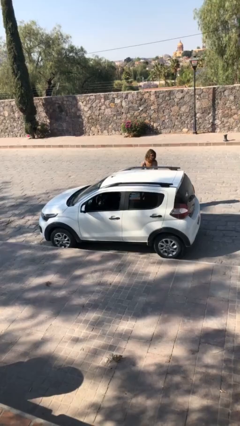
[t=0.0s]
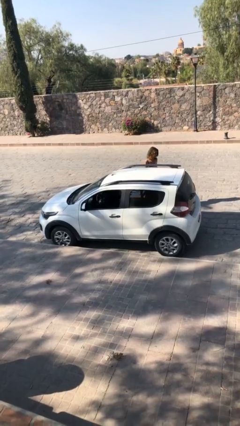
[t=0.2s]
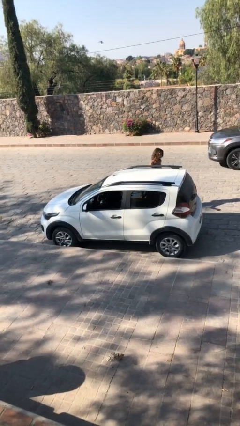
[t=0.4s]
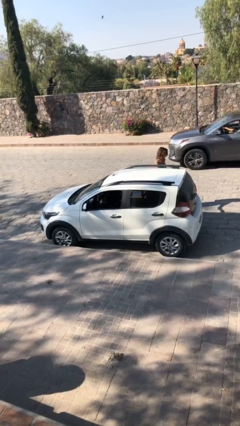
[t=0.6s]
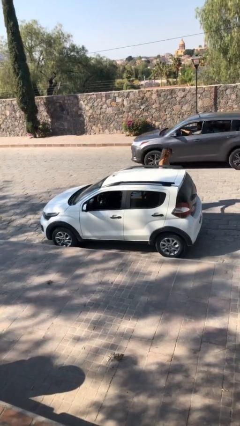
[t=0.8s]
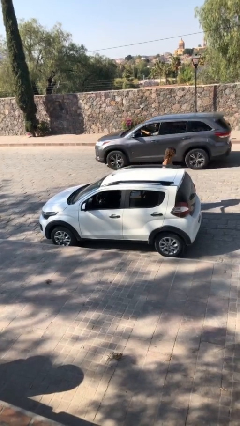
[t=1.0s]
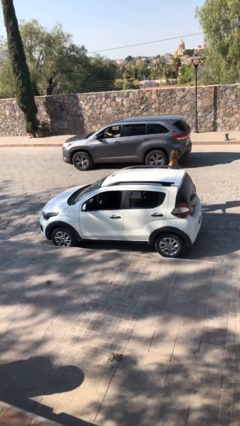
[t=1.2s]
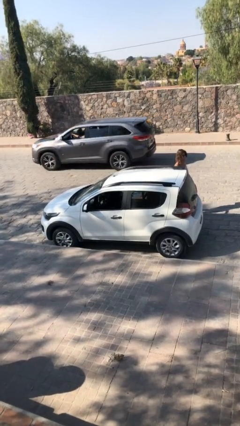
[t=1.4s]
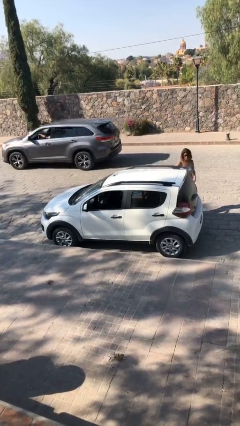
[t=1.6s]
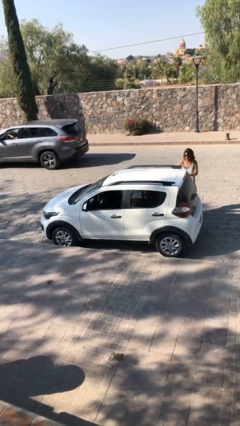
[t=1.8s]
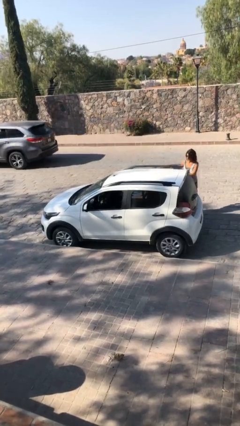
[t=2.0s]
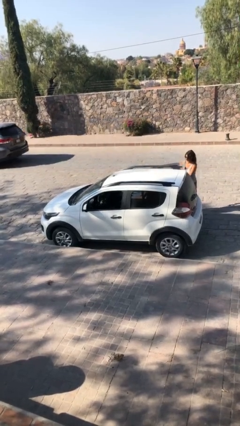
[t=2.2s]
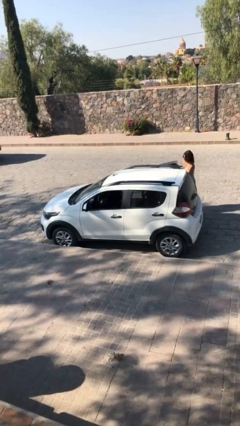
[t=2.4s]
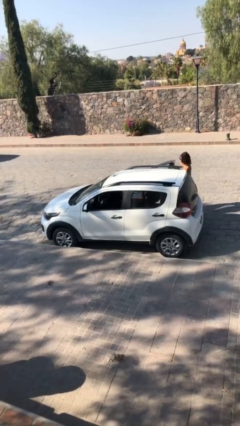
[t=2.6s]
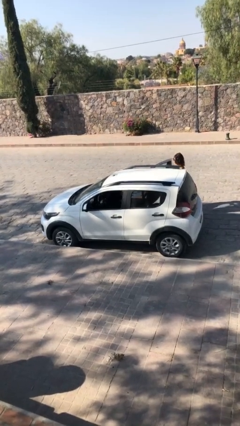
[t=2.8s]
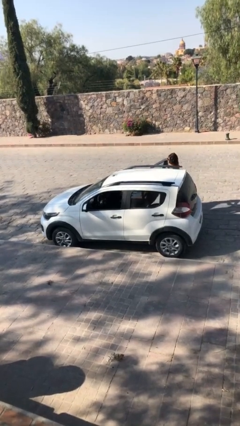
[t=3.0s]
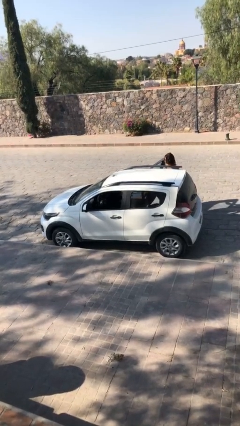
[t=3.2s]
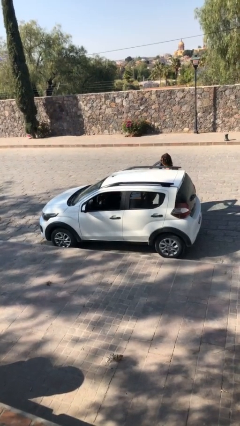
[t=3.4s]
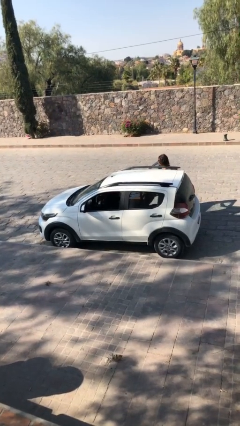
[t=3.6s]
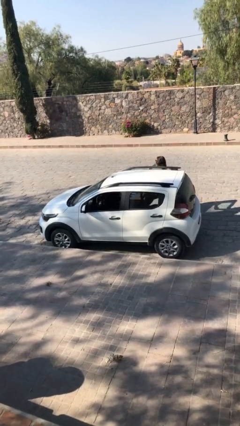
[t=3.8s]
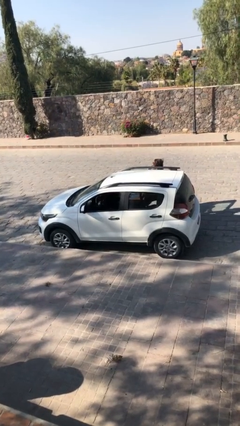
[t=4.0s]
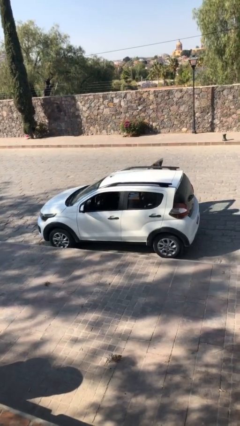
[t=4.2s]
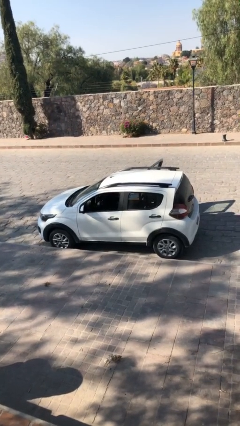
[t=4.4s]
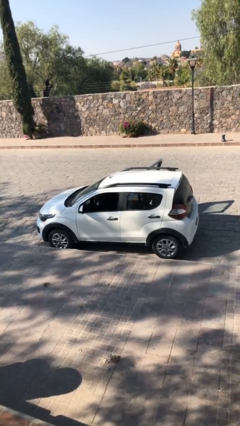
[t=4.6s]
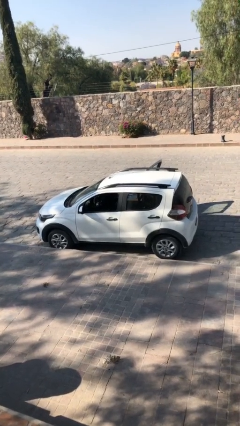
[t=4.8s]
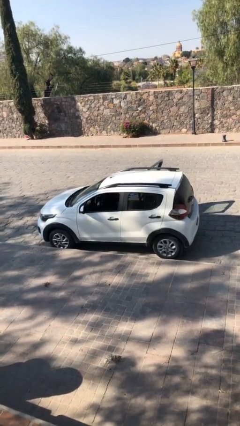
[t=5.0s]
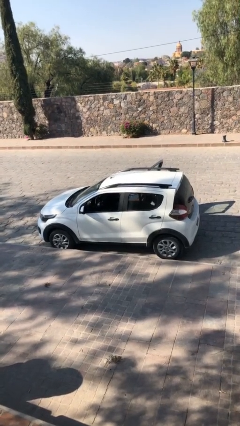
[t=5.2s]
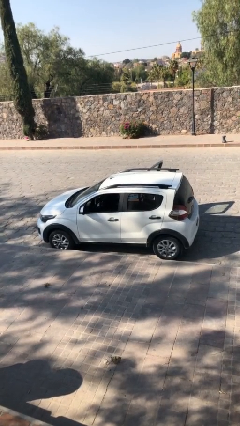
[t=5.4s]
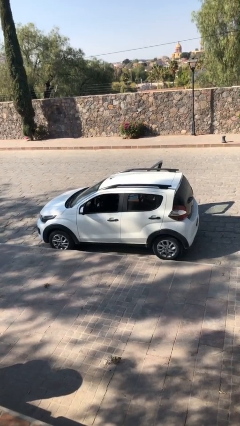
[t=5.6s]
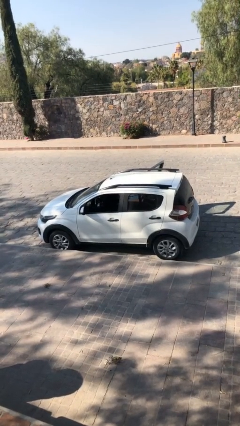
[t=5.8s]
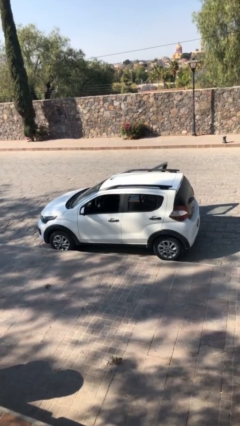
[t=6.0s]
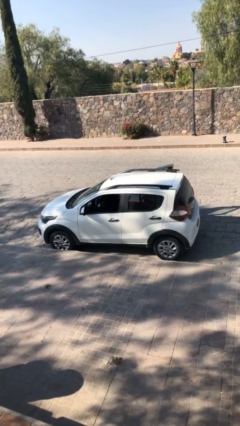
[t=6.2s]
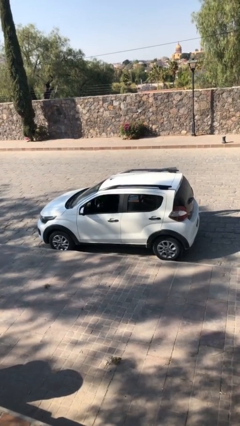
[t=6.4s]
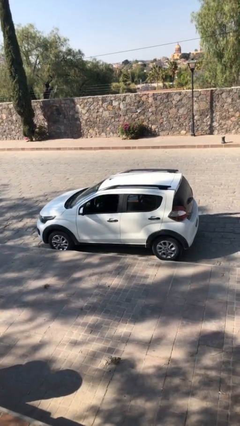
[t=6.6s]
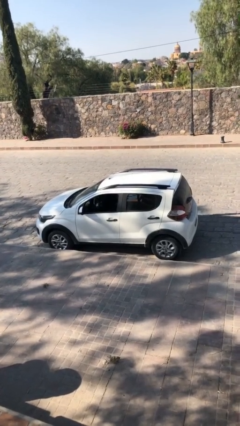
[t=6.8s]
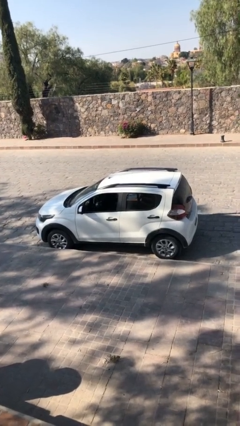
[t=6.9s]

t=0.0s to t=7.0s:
car picks up person

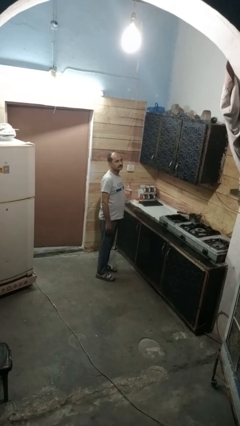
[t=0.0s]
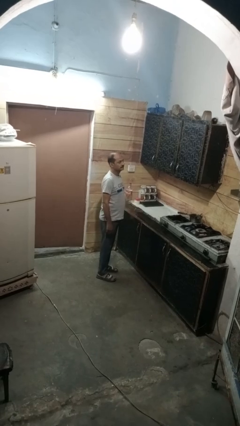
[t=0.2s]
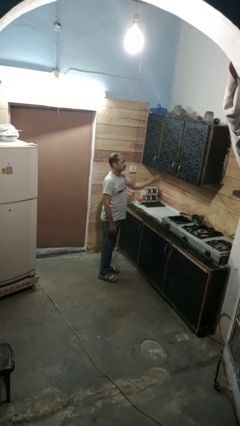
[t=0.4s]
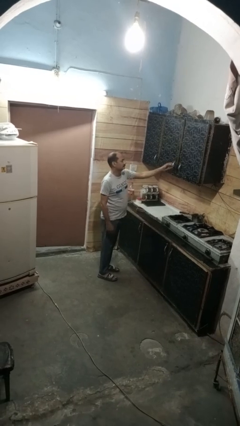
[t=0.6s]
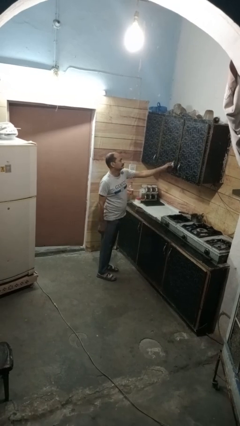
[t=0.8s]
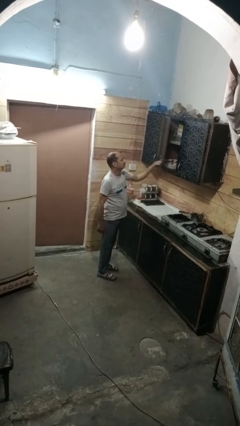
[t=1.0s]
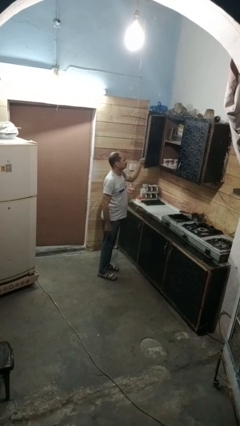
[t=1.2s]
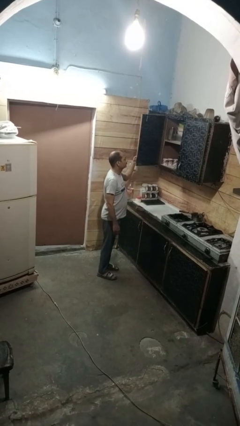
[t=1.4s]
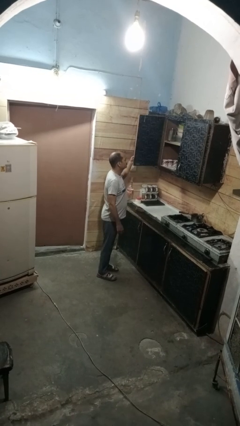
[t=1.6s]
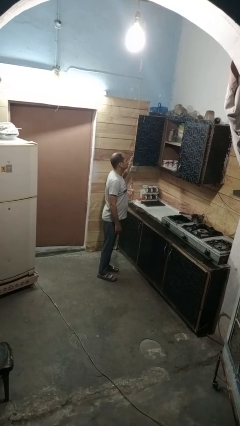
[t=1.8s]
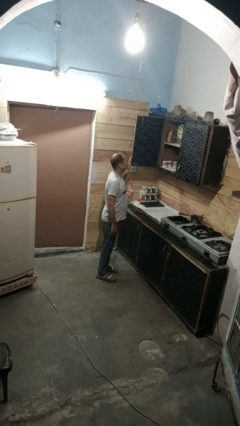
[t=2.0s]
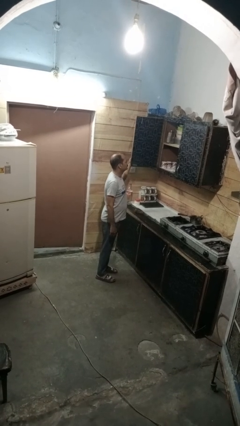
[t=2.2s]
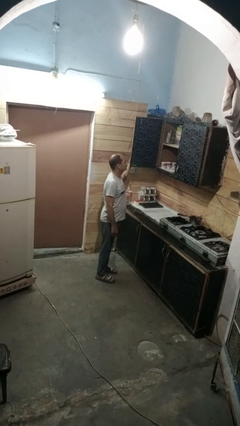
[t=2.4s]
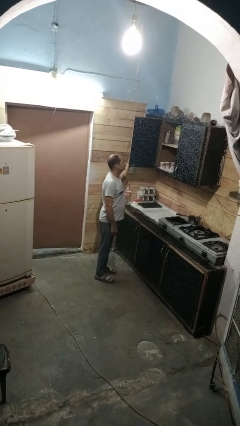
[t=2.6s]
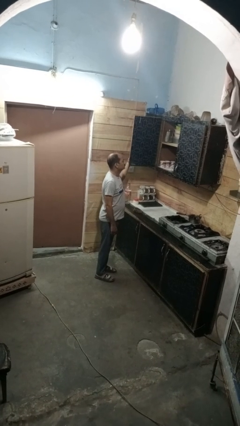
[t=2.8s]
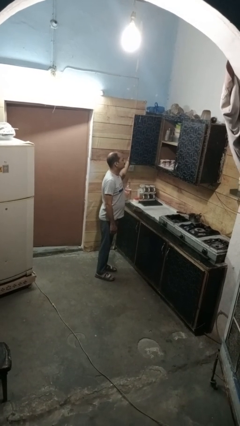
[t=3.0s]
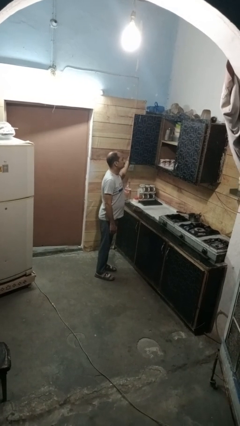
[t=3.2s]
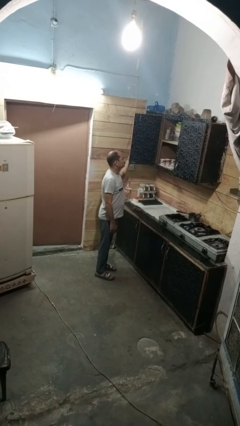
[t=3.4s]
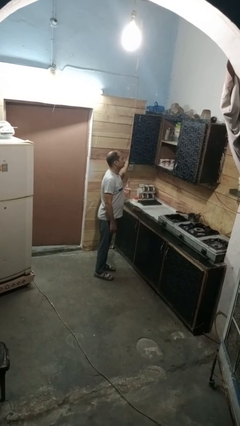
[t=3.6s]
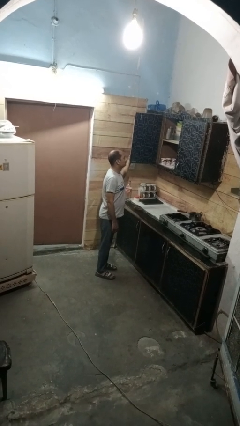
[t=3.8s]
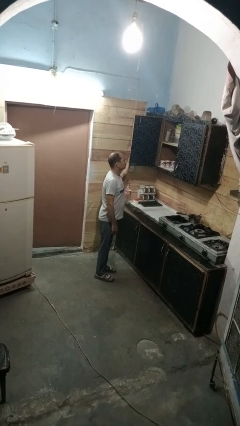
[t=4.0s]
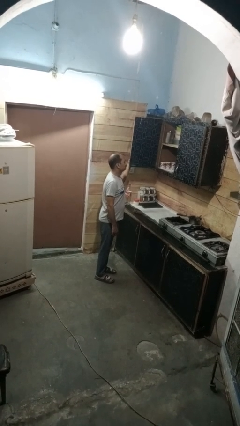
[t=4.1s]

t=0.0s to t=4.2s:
person opens cabinet

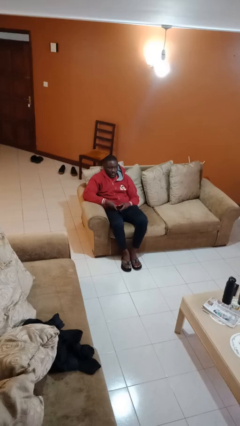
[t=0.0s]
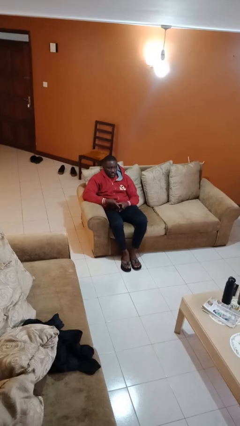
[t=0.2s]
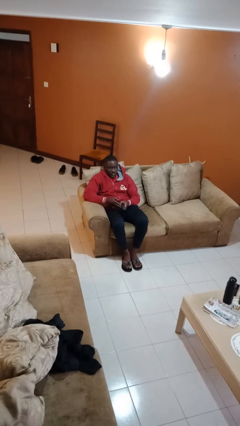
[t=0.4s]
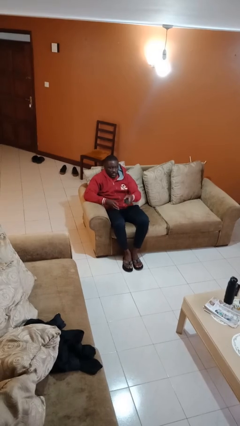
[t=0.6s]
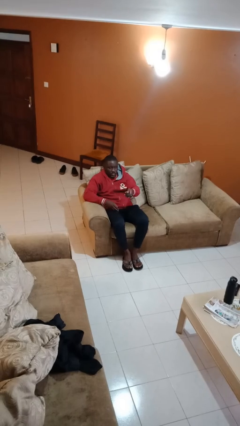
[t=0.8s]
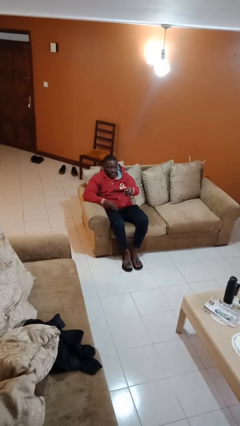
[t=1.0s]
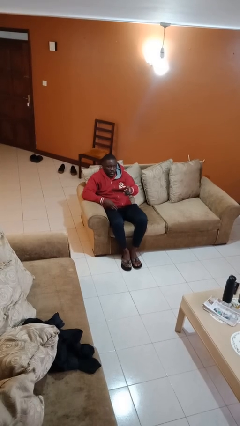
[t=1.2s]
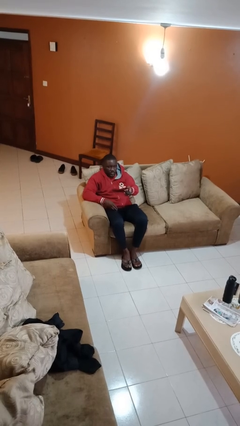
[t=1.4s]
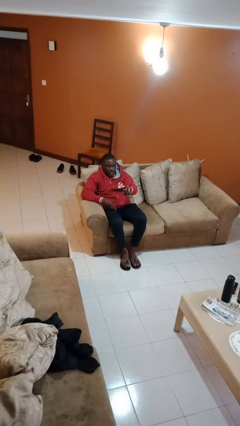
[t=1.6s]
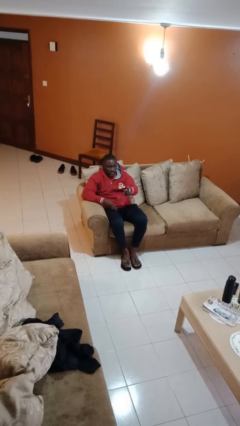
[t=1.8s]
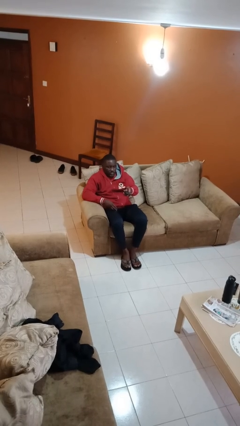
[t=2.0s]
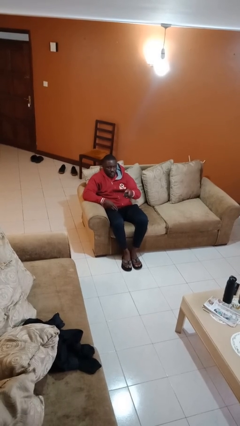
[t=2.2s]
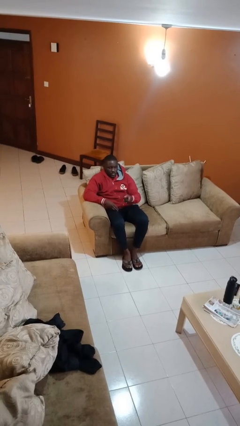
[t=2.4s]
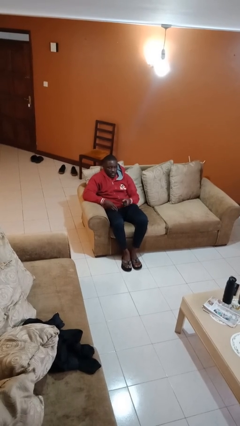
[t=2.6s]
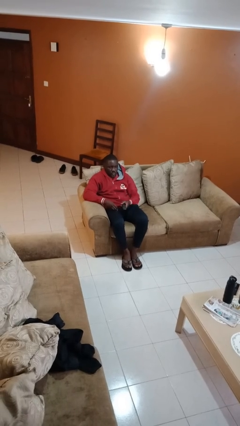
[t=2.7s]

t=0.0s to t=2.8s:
person uses television remote

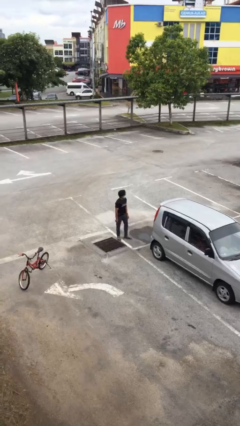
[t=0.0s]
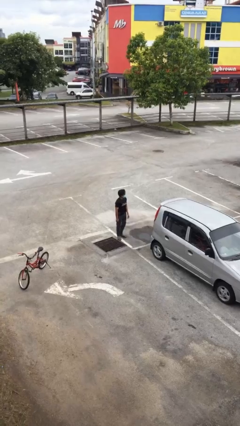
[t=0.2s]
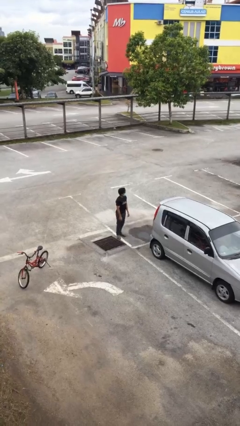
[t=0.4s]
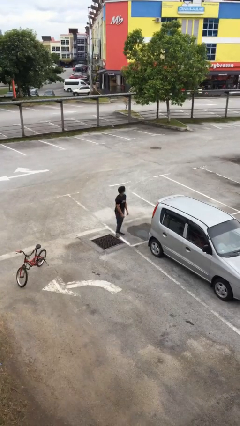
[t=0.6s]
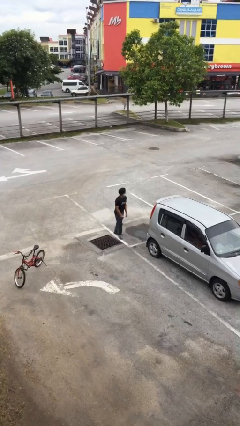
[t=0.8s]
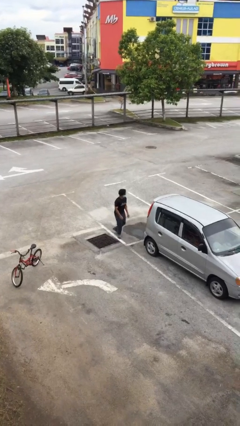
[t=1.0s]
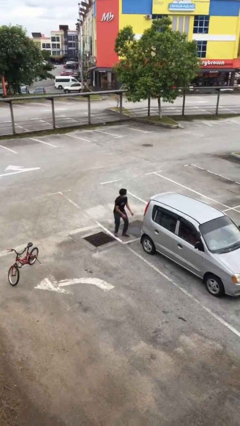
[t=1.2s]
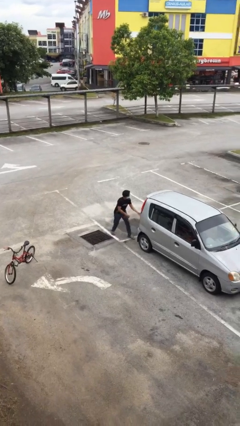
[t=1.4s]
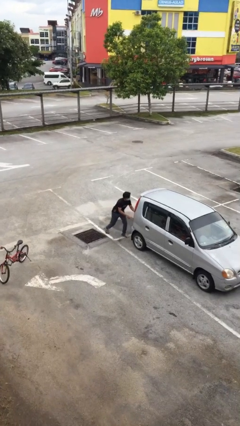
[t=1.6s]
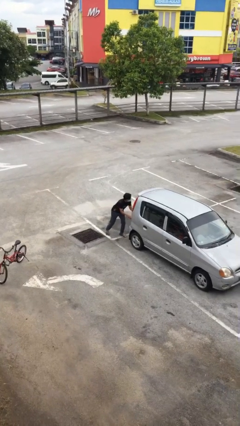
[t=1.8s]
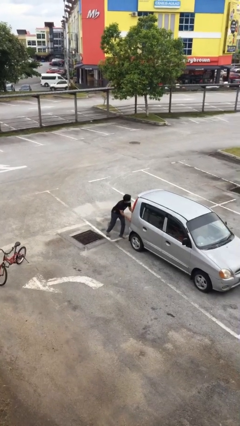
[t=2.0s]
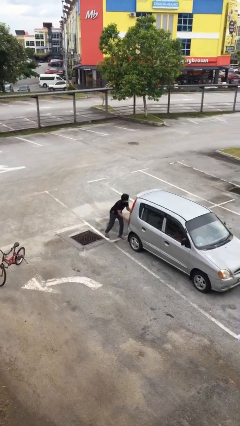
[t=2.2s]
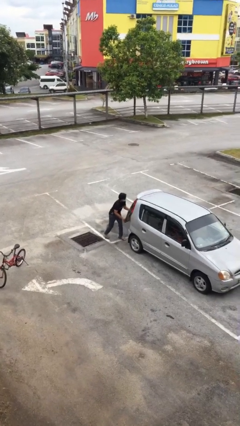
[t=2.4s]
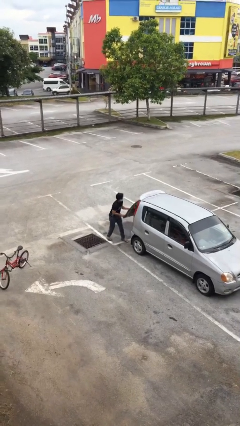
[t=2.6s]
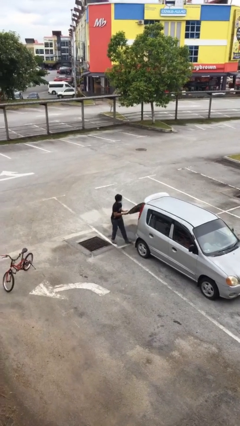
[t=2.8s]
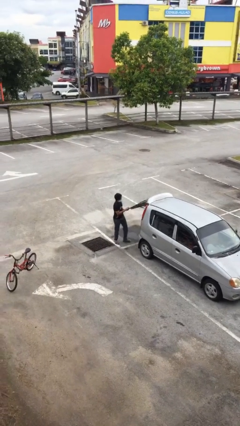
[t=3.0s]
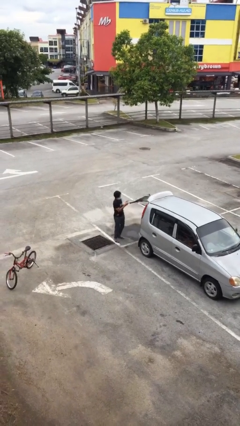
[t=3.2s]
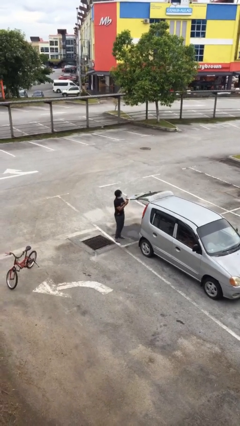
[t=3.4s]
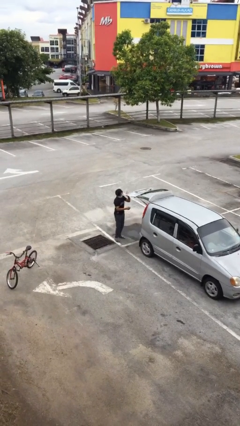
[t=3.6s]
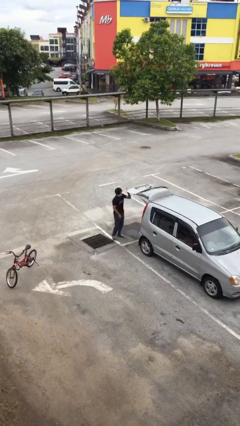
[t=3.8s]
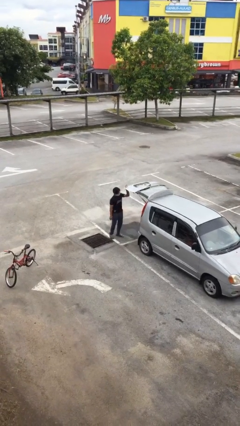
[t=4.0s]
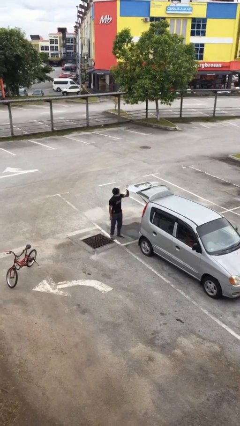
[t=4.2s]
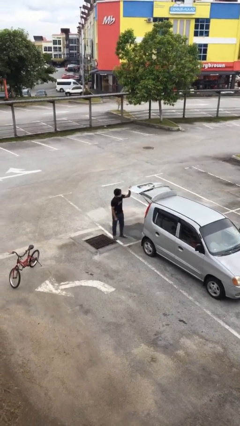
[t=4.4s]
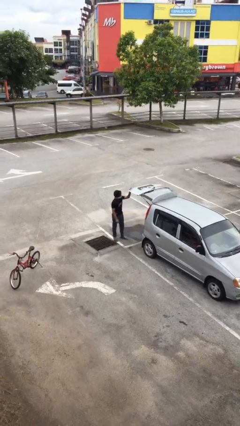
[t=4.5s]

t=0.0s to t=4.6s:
person opens car trunk
